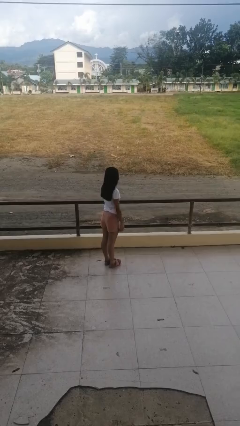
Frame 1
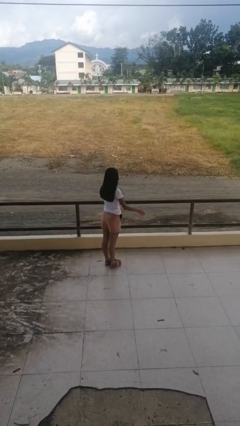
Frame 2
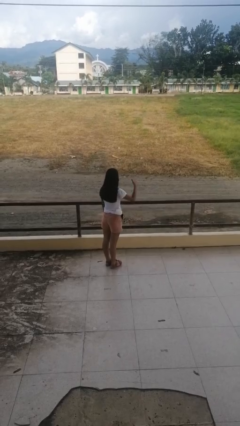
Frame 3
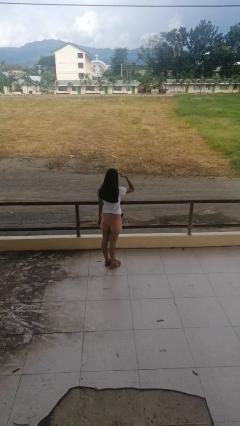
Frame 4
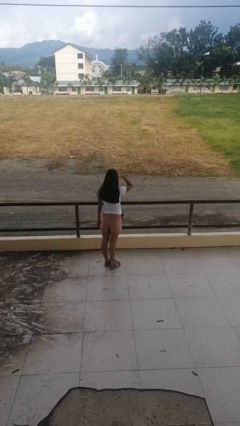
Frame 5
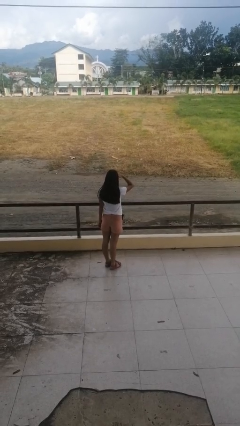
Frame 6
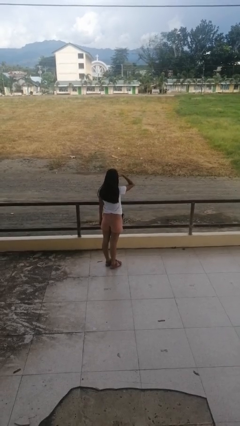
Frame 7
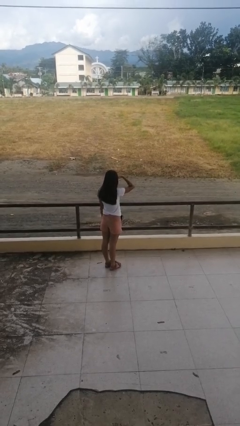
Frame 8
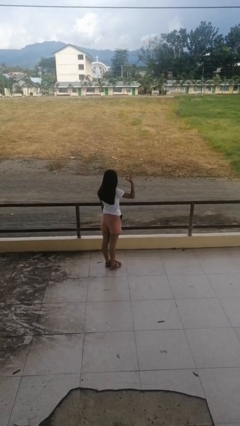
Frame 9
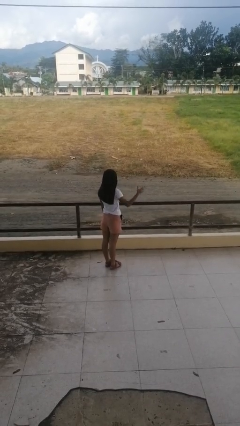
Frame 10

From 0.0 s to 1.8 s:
person shades eyes

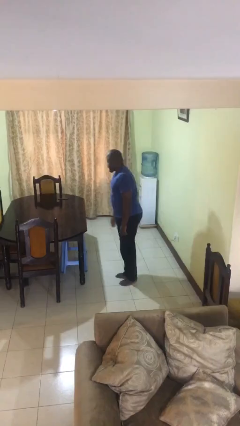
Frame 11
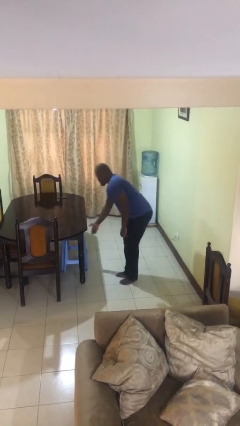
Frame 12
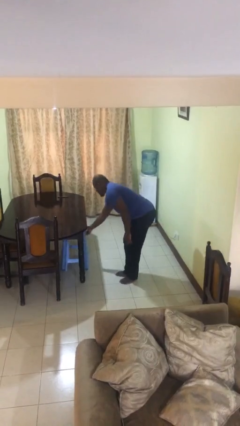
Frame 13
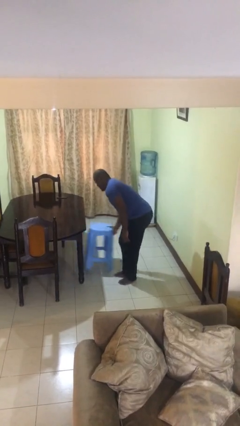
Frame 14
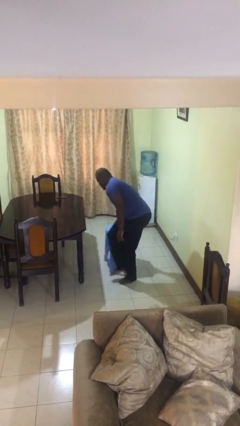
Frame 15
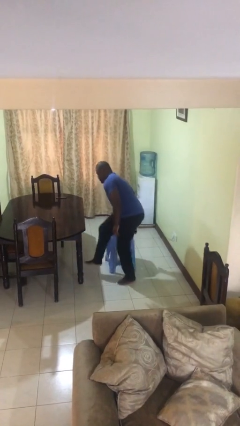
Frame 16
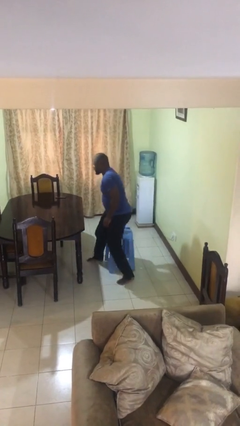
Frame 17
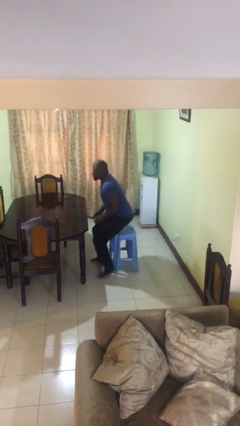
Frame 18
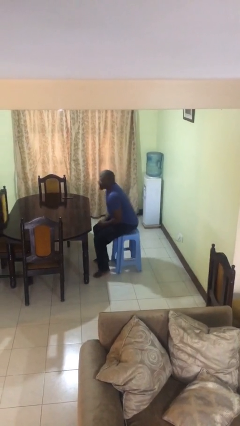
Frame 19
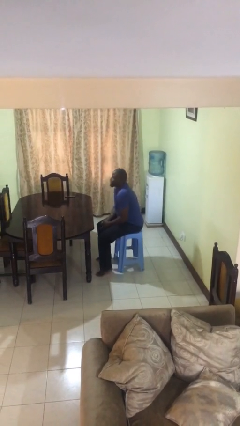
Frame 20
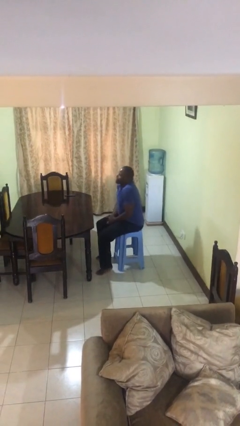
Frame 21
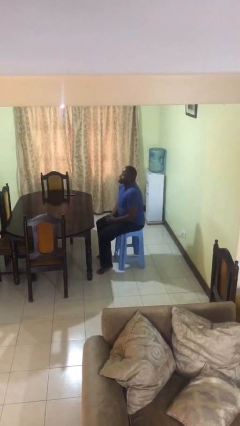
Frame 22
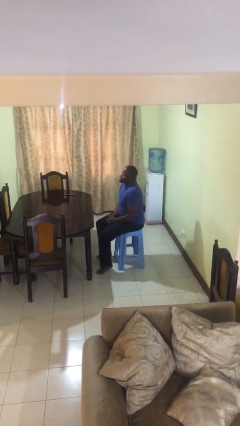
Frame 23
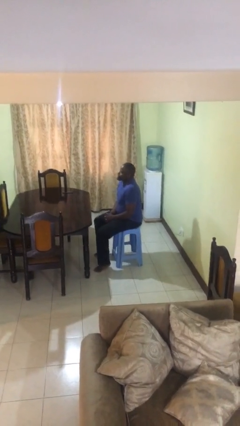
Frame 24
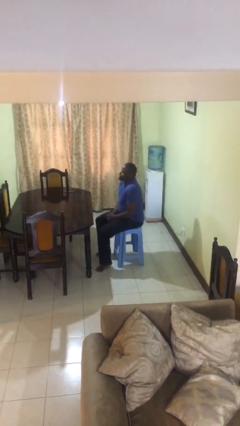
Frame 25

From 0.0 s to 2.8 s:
person sits down

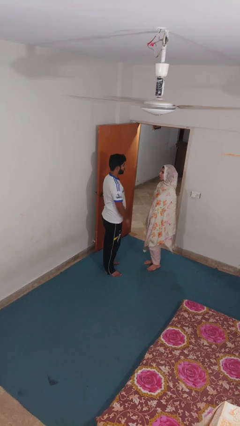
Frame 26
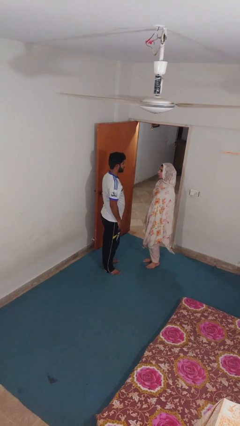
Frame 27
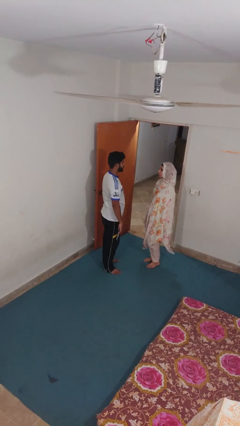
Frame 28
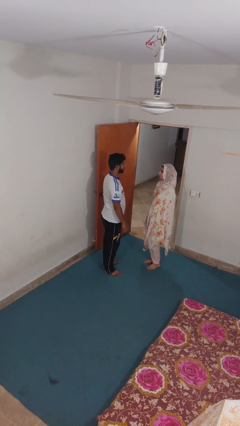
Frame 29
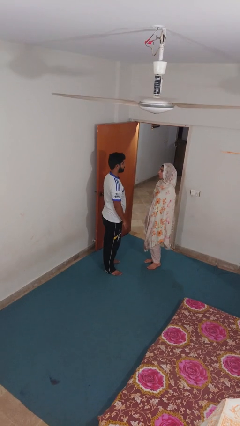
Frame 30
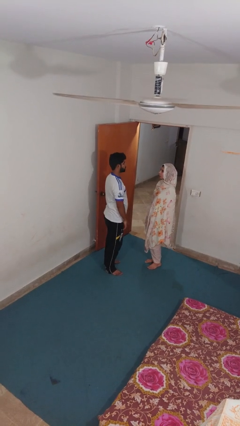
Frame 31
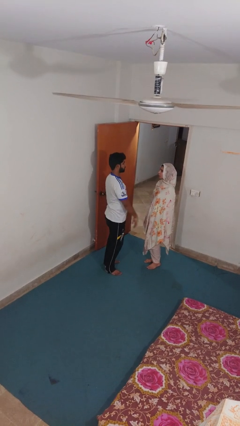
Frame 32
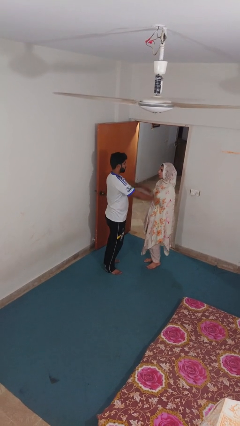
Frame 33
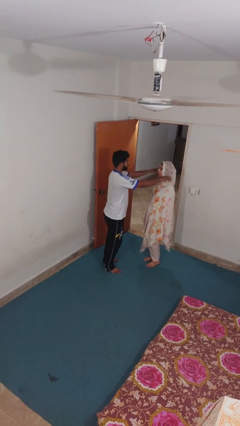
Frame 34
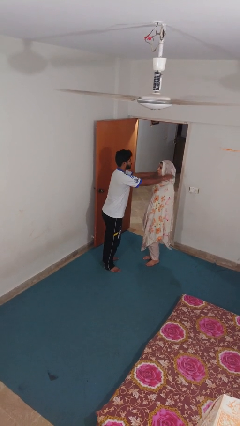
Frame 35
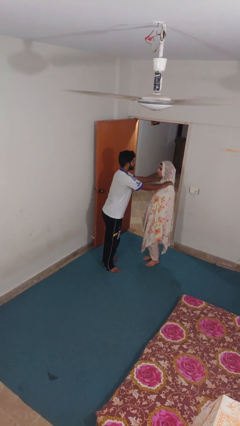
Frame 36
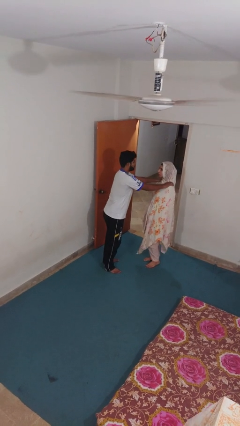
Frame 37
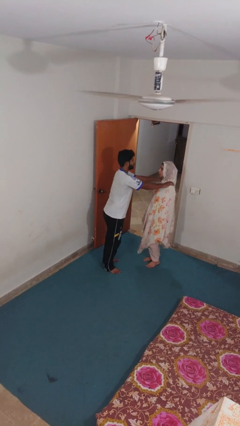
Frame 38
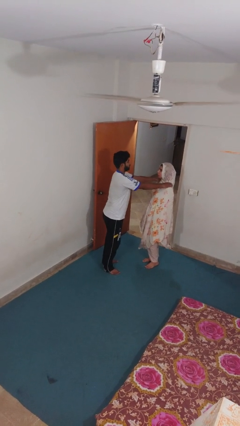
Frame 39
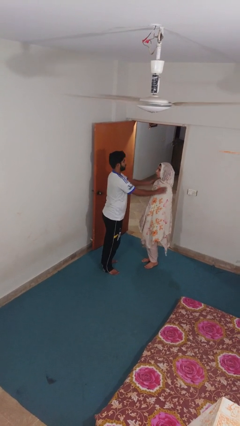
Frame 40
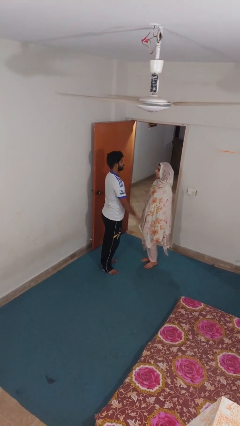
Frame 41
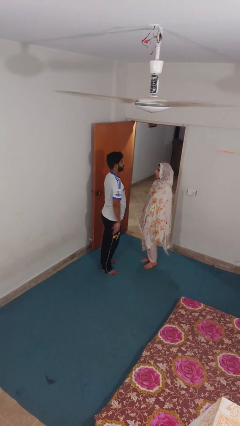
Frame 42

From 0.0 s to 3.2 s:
person pounds shoulders of person

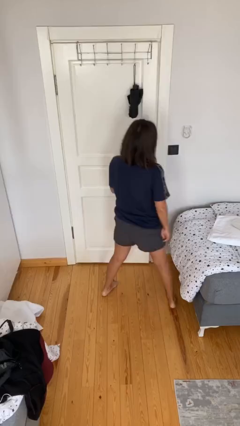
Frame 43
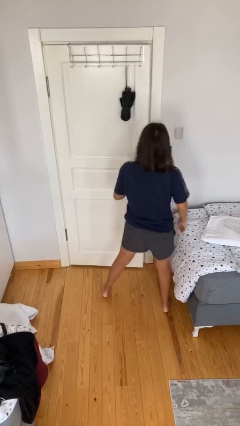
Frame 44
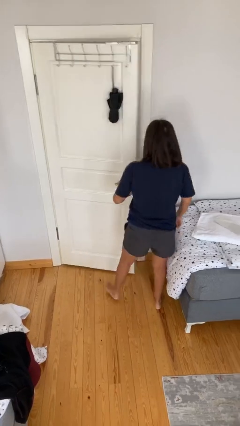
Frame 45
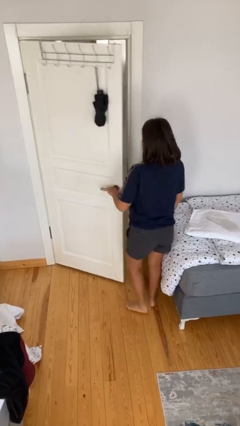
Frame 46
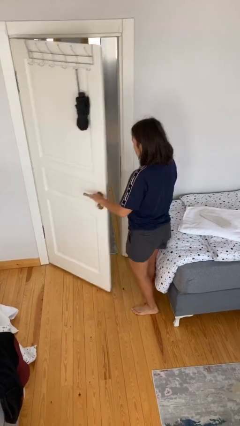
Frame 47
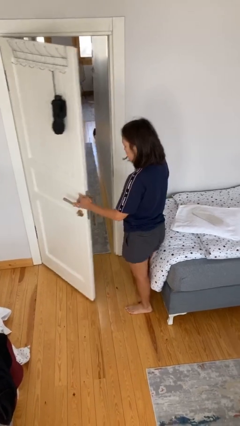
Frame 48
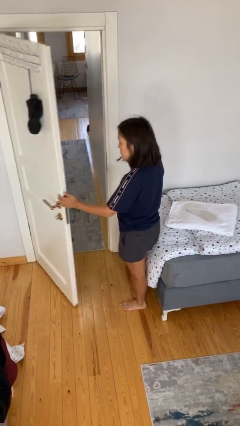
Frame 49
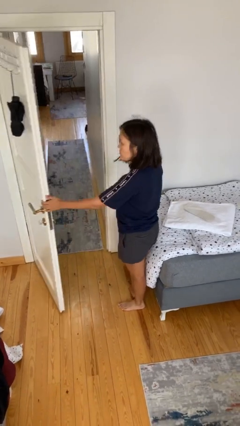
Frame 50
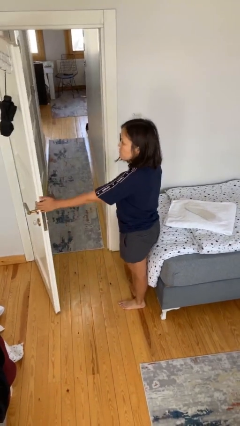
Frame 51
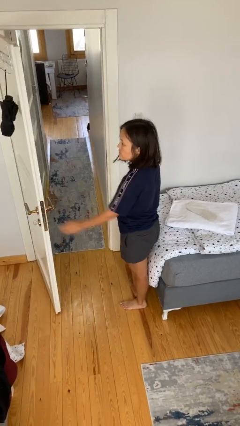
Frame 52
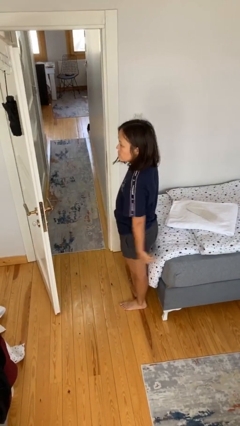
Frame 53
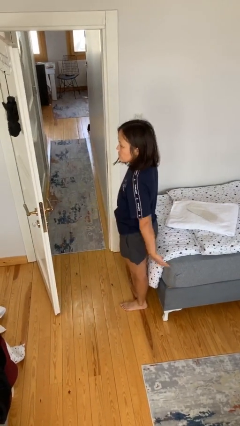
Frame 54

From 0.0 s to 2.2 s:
person opens facility door

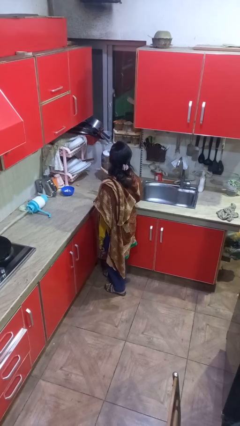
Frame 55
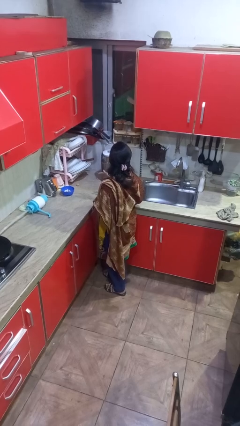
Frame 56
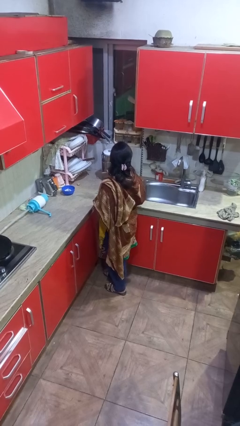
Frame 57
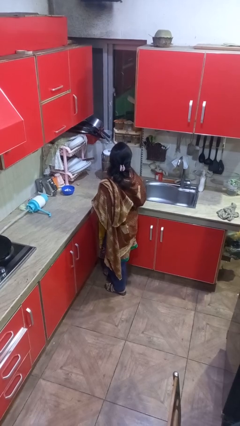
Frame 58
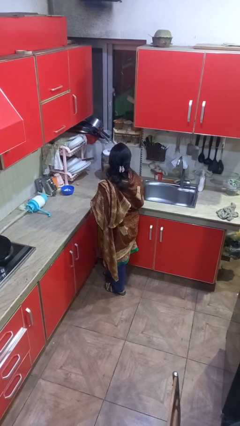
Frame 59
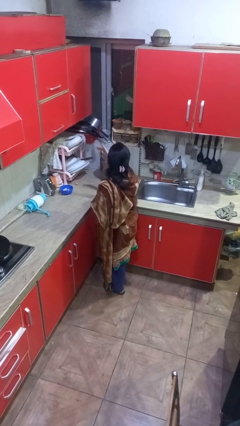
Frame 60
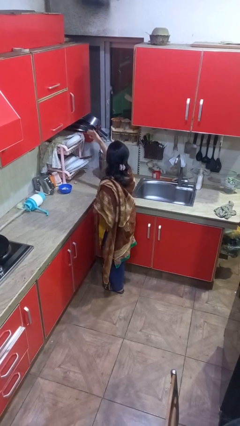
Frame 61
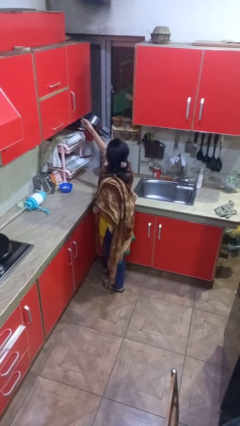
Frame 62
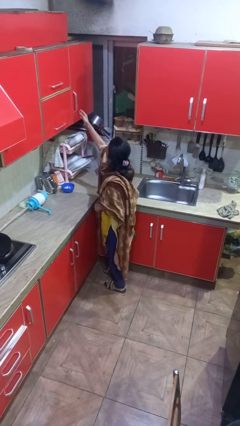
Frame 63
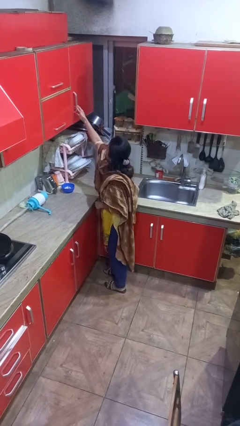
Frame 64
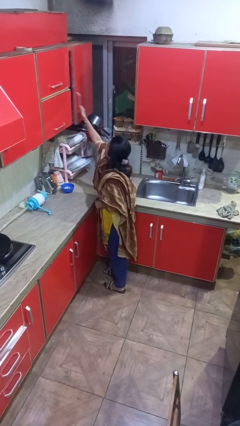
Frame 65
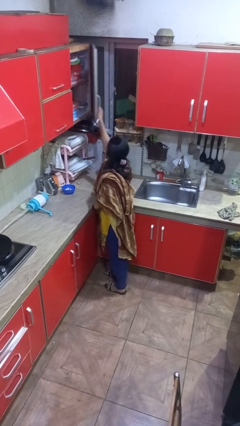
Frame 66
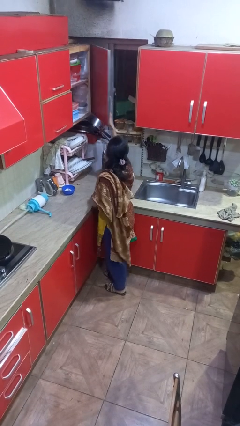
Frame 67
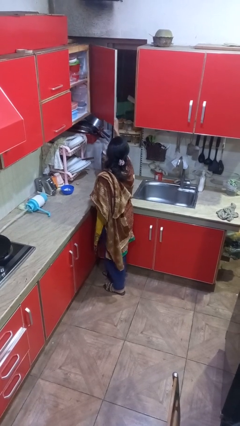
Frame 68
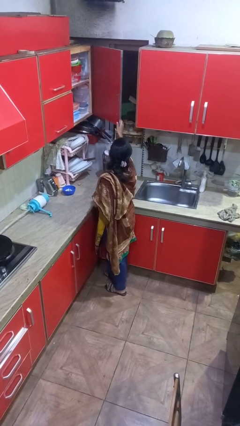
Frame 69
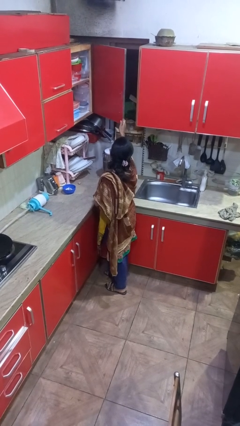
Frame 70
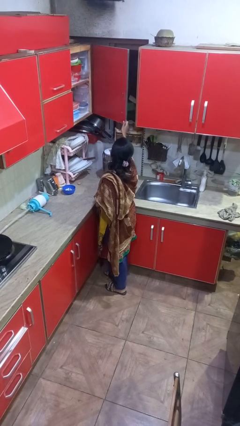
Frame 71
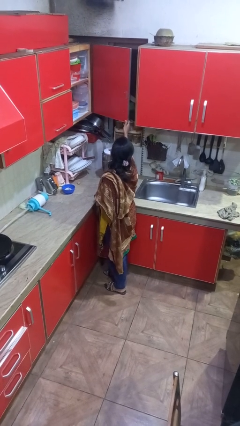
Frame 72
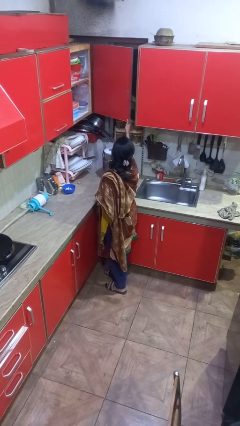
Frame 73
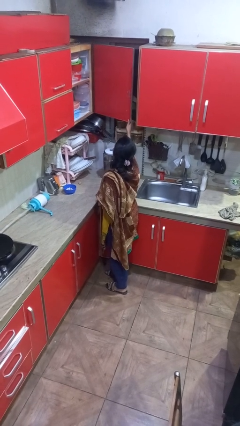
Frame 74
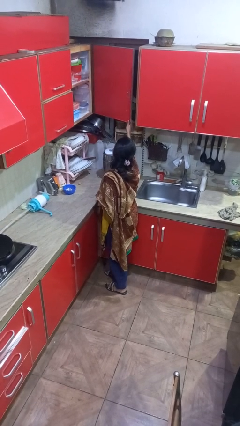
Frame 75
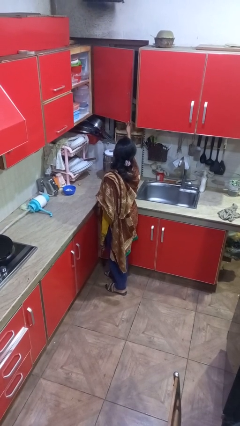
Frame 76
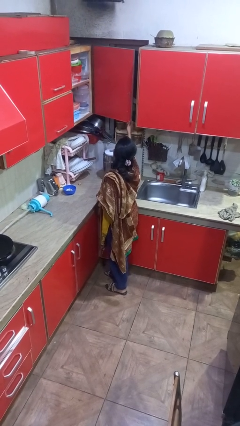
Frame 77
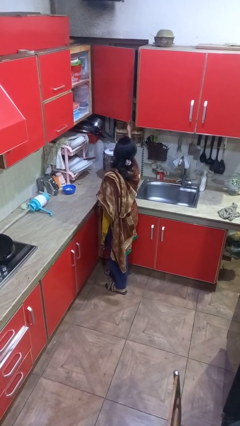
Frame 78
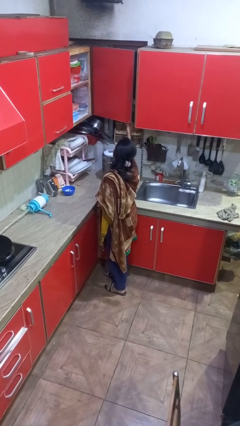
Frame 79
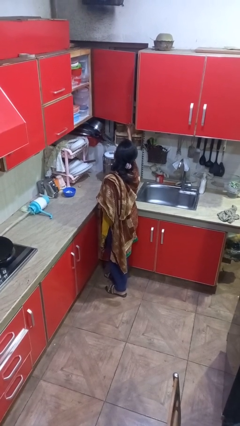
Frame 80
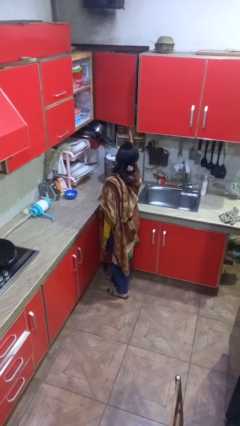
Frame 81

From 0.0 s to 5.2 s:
person opens cabinet

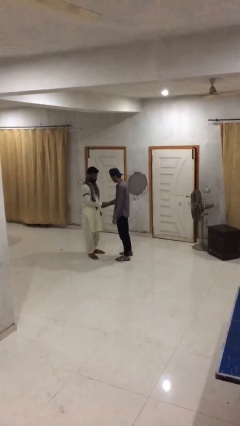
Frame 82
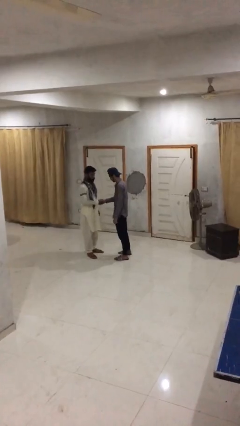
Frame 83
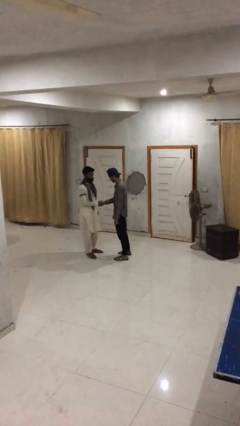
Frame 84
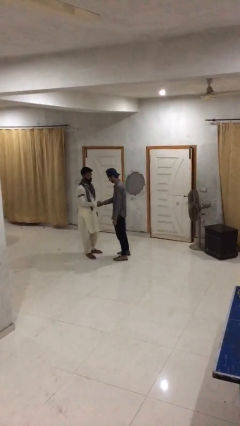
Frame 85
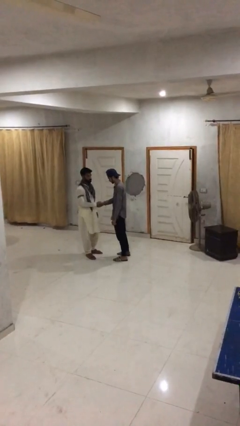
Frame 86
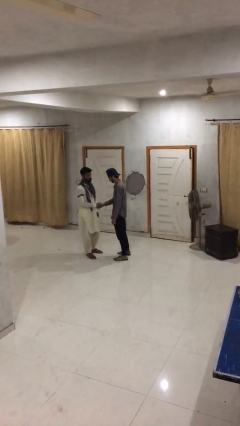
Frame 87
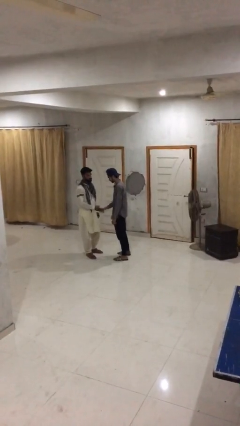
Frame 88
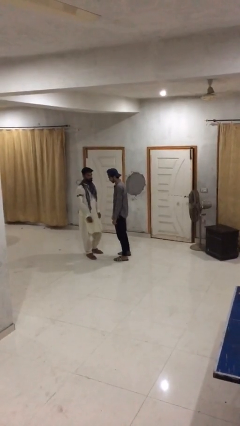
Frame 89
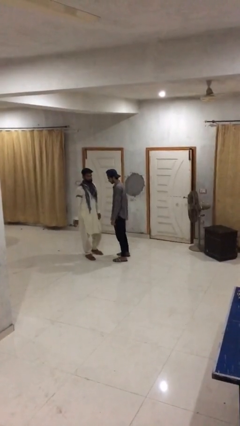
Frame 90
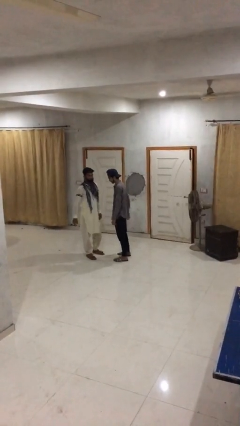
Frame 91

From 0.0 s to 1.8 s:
person shakes hand

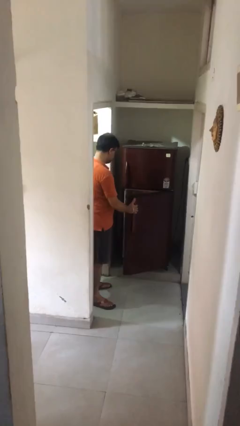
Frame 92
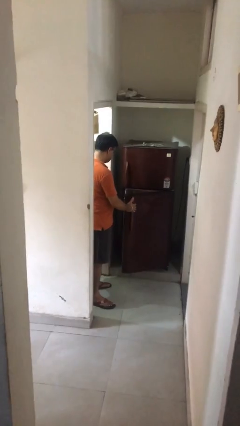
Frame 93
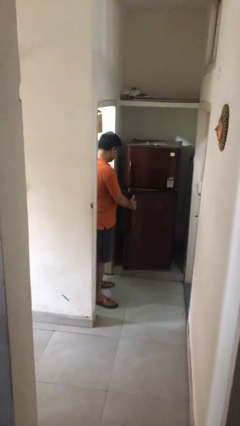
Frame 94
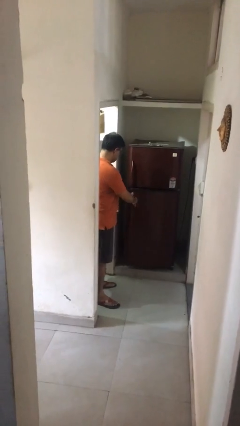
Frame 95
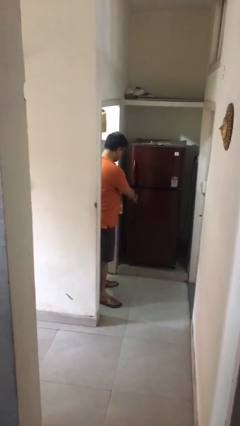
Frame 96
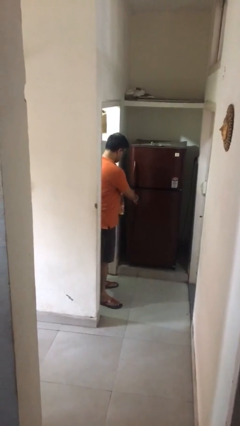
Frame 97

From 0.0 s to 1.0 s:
person closes refrigerator
